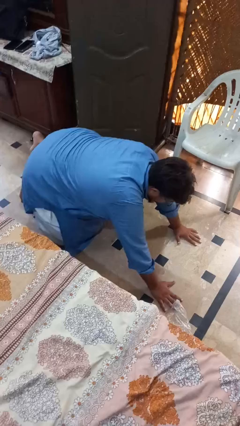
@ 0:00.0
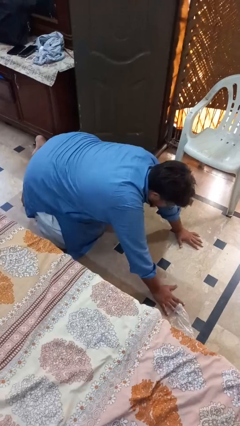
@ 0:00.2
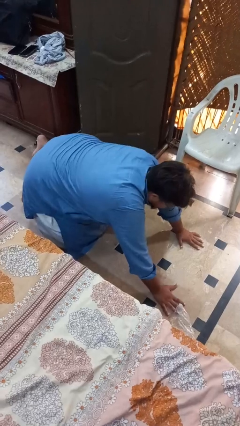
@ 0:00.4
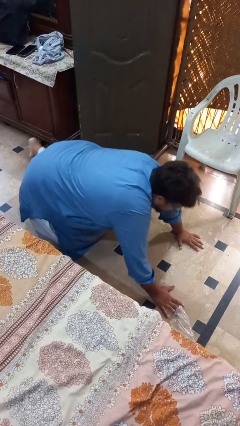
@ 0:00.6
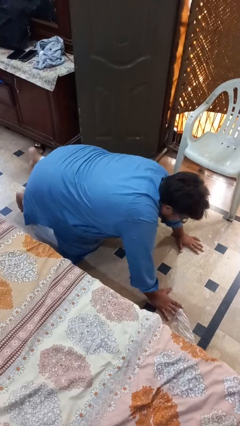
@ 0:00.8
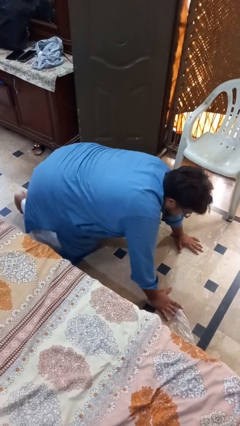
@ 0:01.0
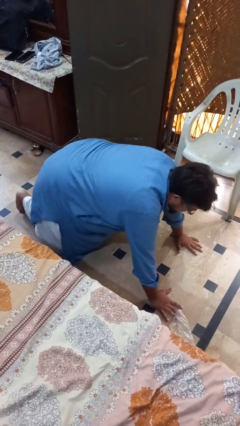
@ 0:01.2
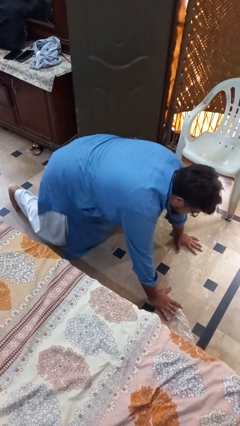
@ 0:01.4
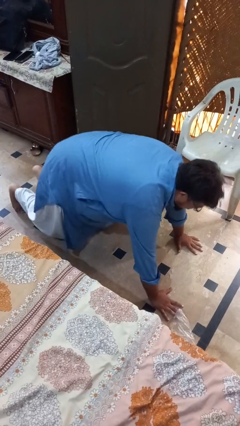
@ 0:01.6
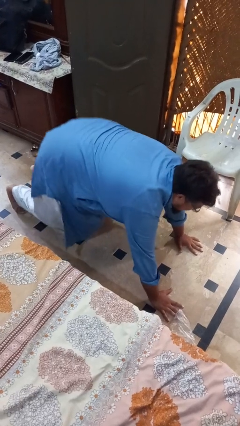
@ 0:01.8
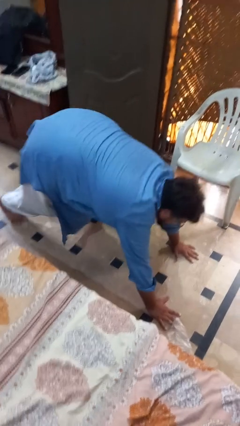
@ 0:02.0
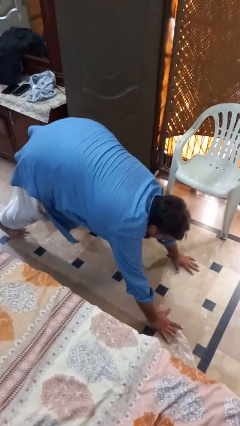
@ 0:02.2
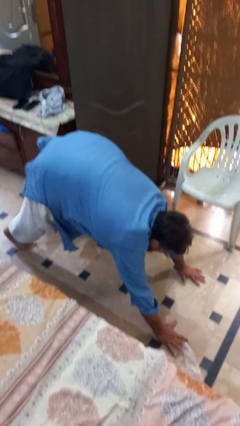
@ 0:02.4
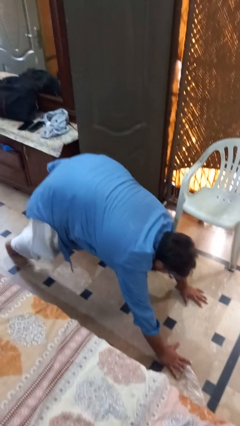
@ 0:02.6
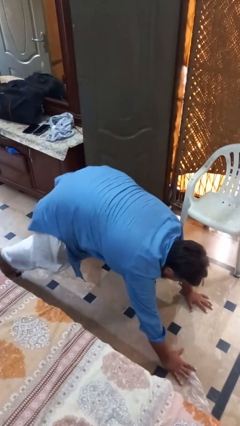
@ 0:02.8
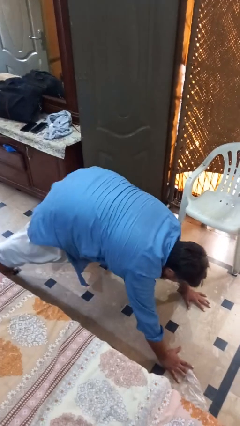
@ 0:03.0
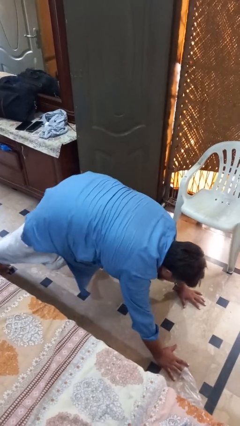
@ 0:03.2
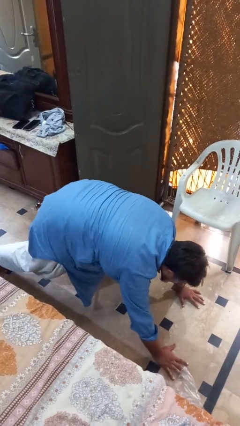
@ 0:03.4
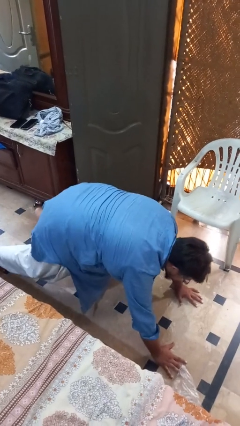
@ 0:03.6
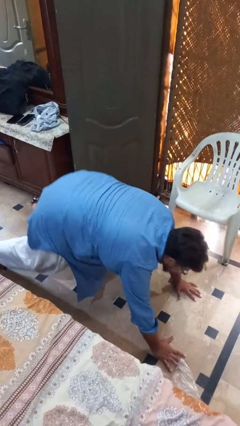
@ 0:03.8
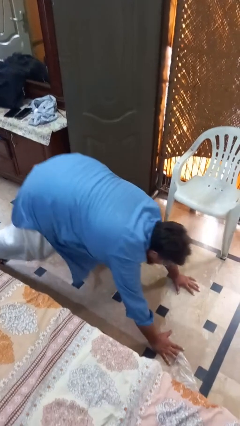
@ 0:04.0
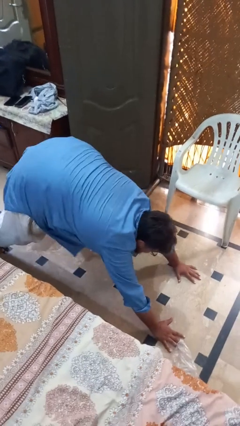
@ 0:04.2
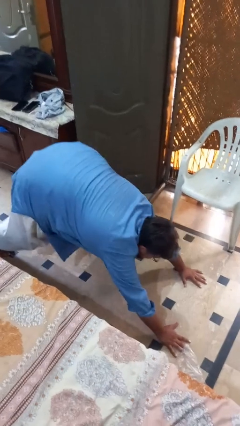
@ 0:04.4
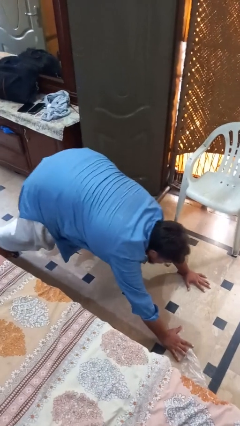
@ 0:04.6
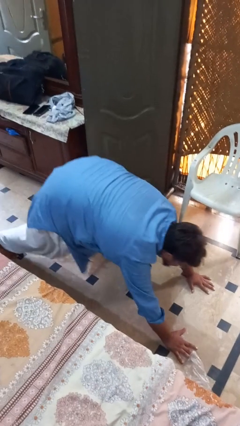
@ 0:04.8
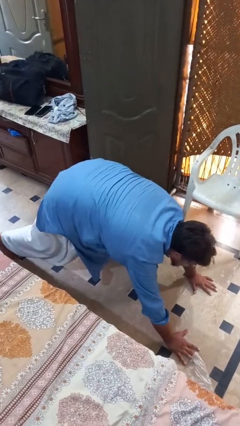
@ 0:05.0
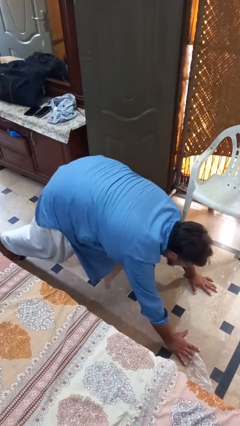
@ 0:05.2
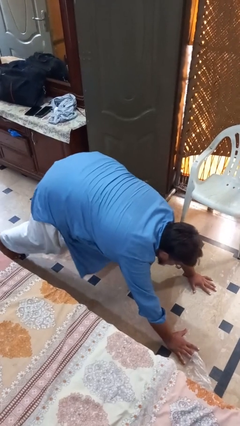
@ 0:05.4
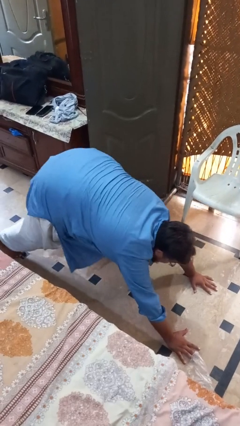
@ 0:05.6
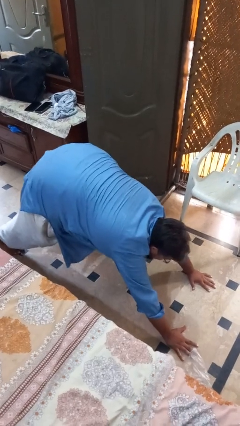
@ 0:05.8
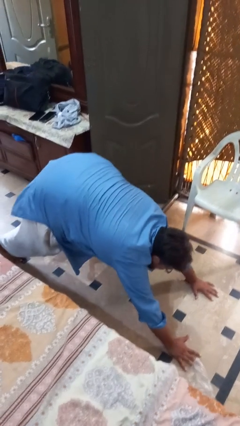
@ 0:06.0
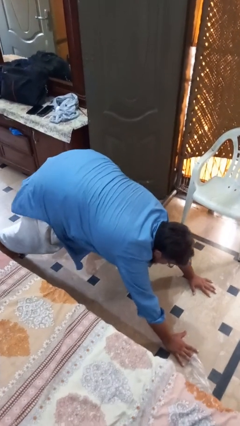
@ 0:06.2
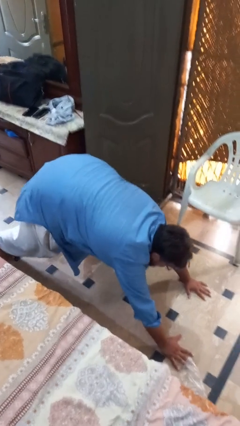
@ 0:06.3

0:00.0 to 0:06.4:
person exercises with pushup

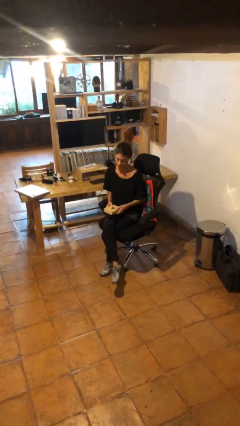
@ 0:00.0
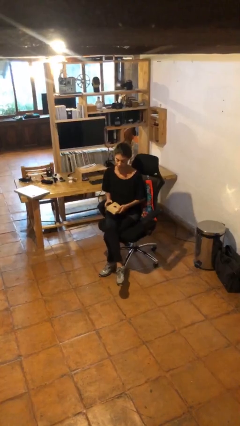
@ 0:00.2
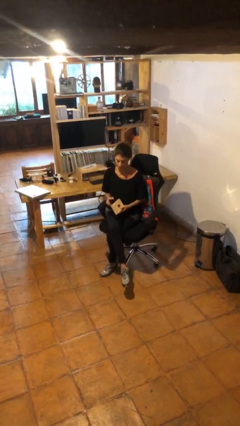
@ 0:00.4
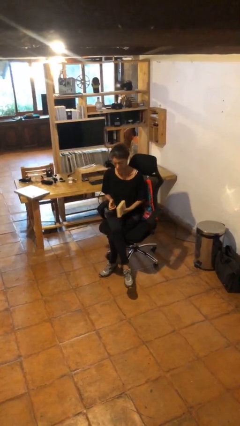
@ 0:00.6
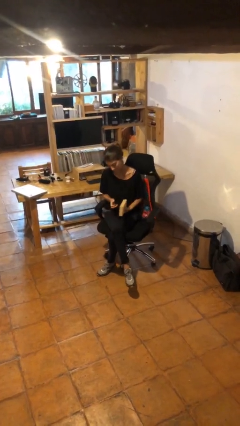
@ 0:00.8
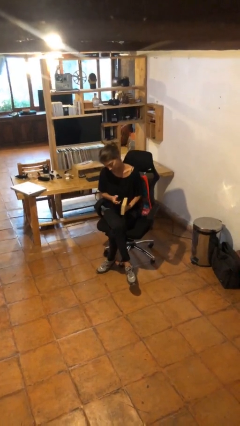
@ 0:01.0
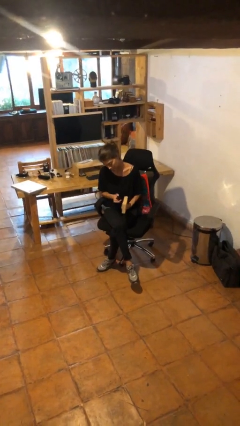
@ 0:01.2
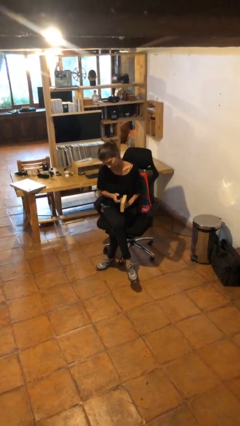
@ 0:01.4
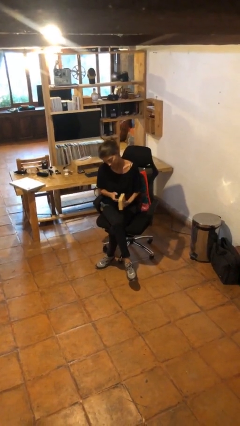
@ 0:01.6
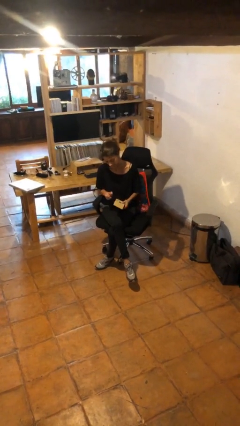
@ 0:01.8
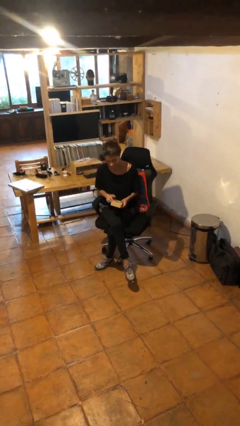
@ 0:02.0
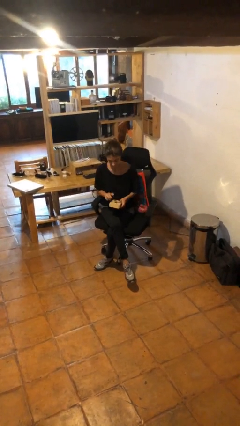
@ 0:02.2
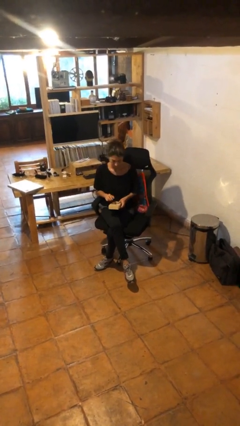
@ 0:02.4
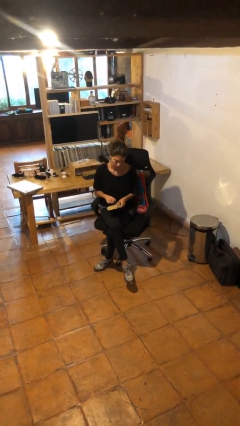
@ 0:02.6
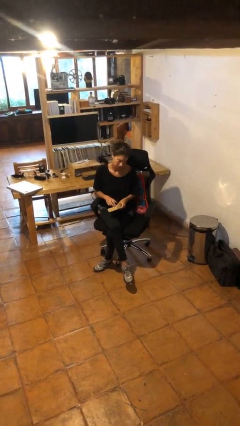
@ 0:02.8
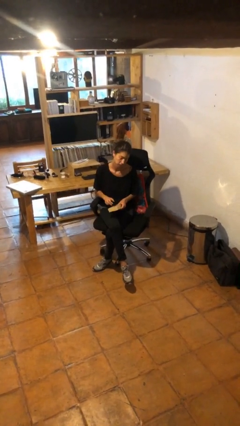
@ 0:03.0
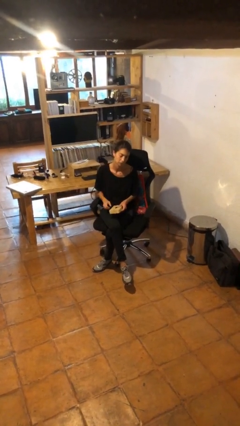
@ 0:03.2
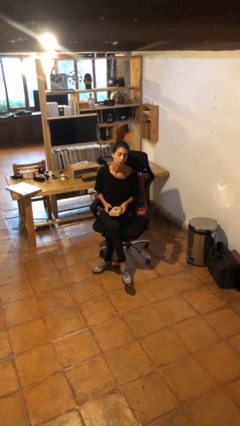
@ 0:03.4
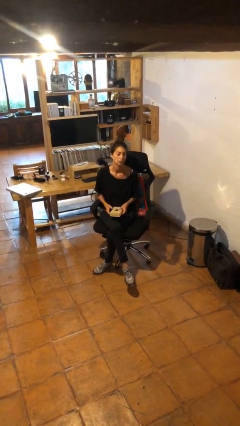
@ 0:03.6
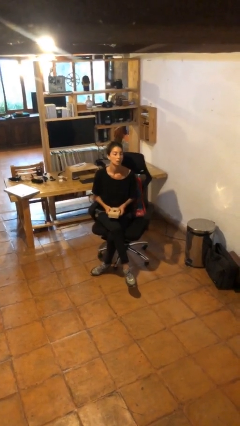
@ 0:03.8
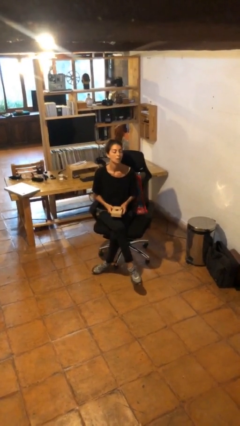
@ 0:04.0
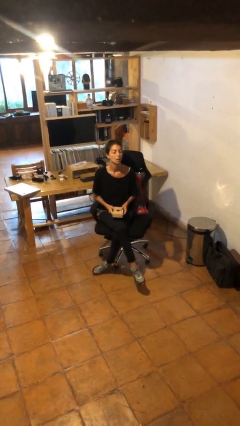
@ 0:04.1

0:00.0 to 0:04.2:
person taps object with finger

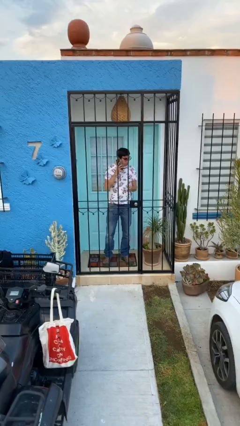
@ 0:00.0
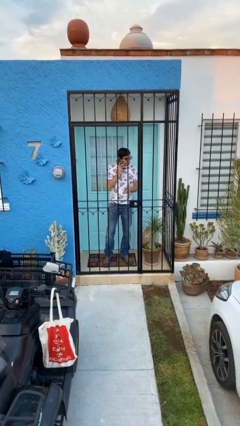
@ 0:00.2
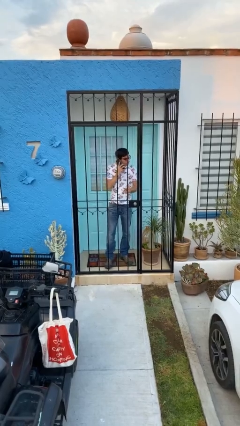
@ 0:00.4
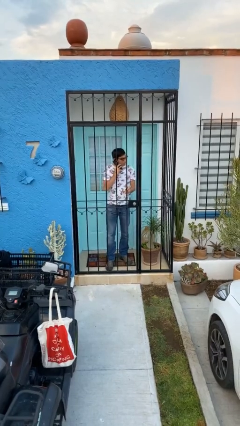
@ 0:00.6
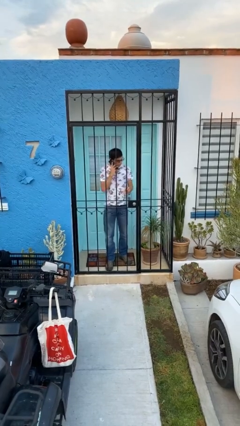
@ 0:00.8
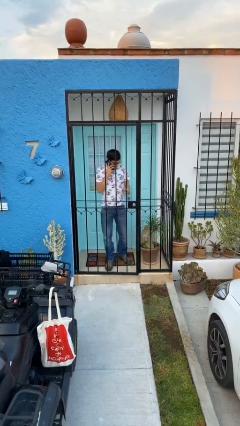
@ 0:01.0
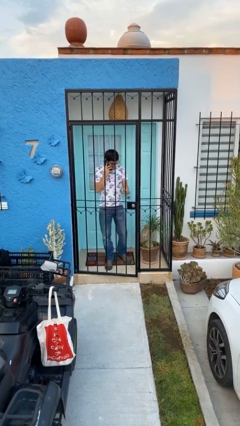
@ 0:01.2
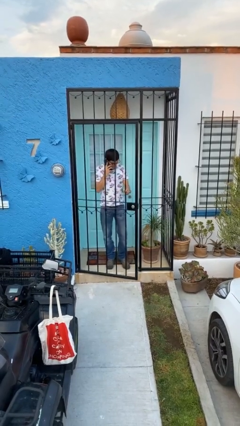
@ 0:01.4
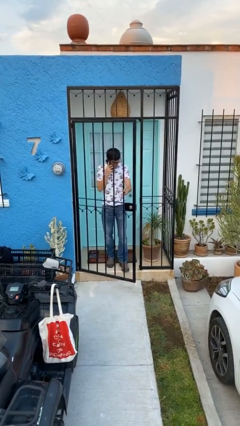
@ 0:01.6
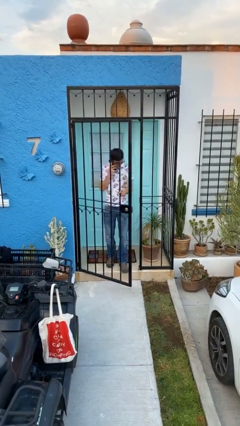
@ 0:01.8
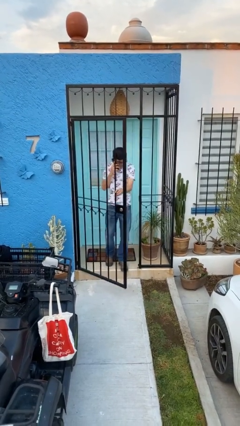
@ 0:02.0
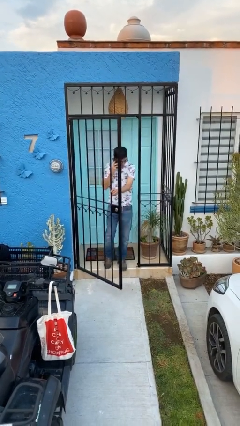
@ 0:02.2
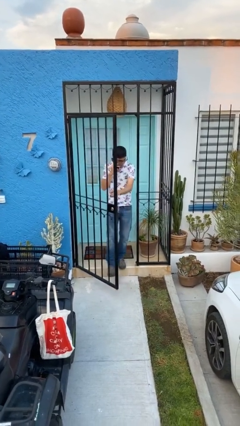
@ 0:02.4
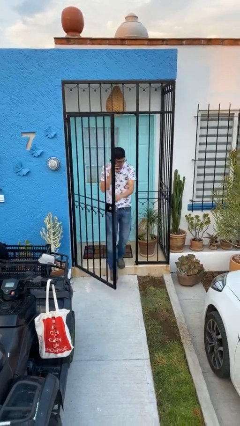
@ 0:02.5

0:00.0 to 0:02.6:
person opens facility door

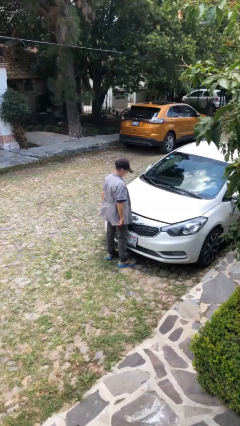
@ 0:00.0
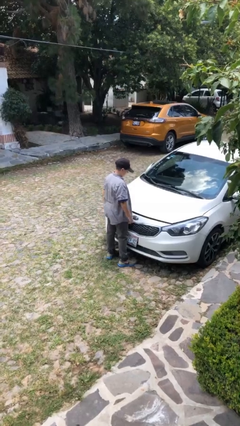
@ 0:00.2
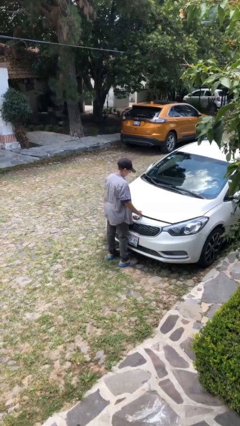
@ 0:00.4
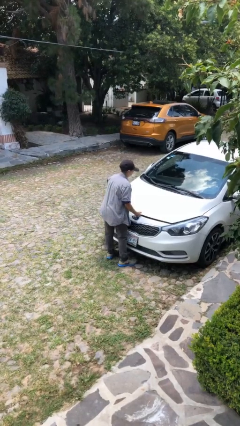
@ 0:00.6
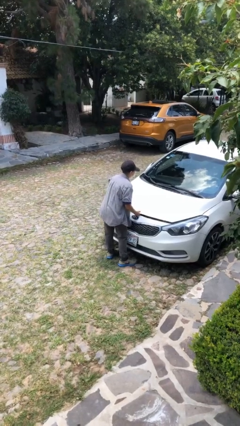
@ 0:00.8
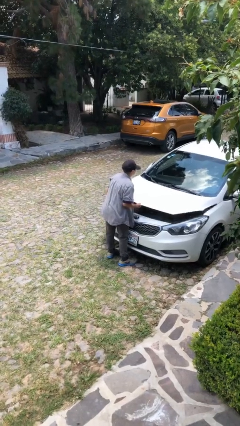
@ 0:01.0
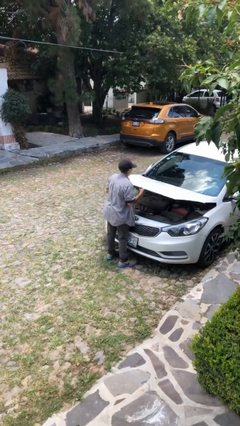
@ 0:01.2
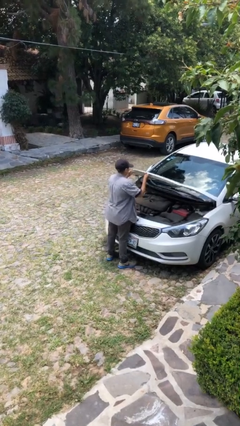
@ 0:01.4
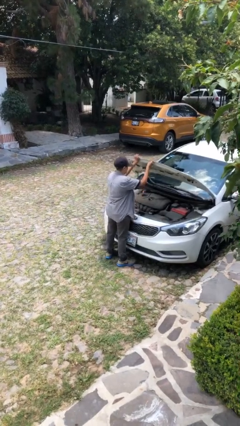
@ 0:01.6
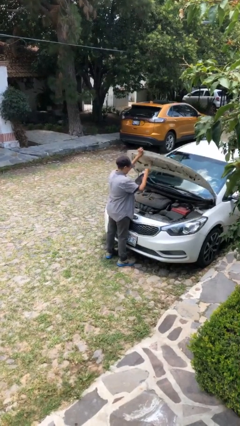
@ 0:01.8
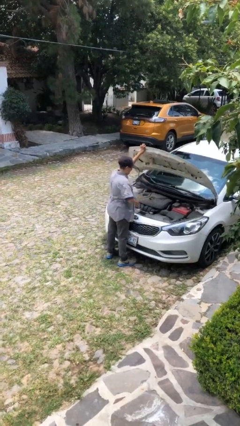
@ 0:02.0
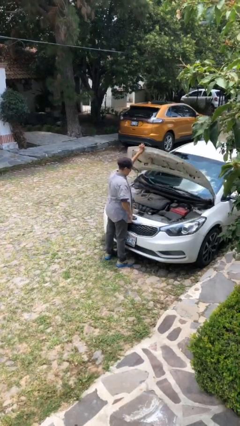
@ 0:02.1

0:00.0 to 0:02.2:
person opens car hood

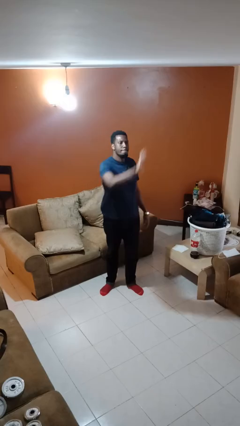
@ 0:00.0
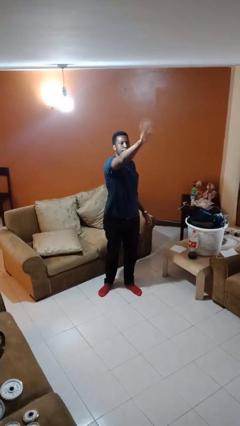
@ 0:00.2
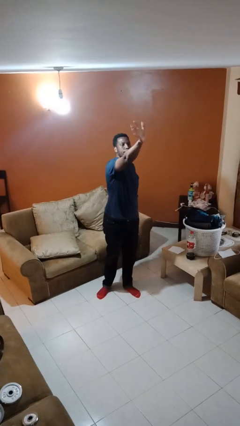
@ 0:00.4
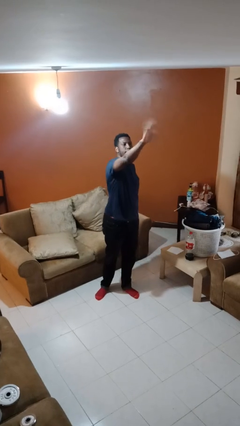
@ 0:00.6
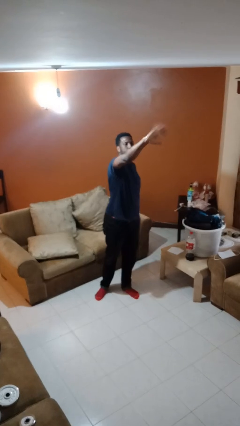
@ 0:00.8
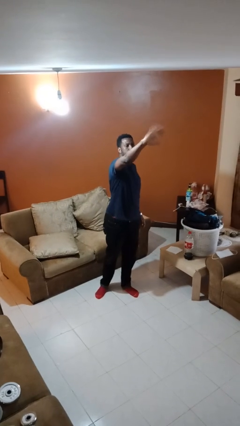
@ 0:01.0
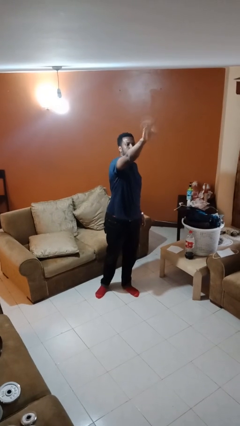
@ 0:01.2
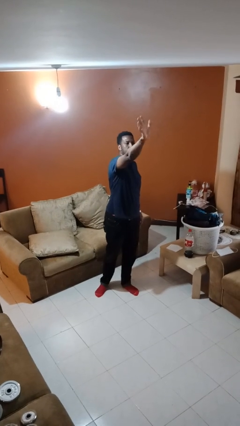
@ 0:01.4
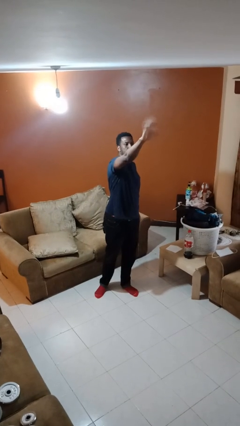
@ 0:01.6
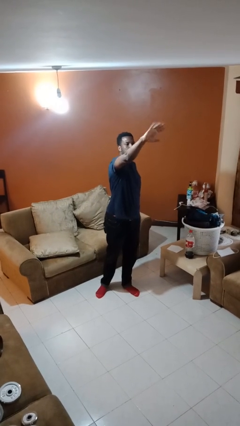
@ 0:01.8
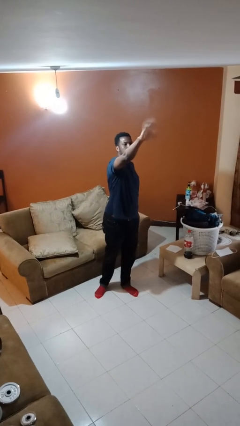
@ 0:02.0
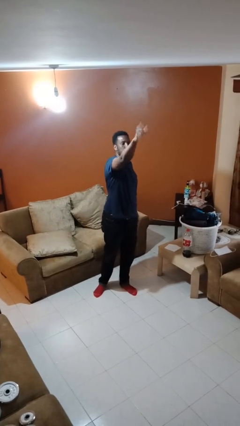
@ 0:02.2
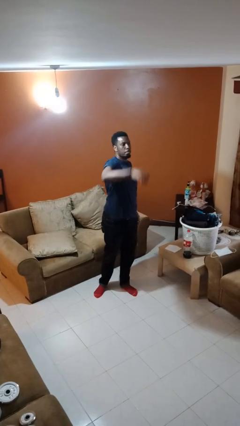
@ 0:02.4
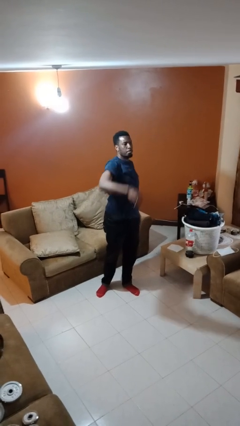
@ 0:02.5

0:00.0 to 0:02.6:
person waves at person
